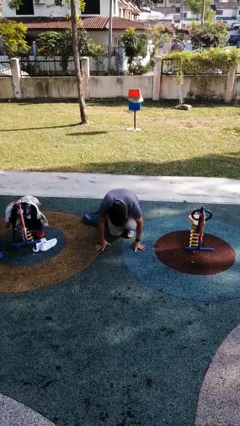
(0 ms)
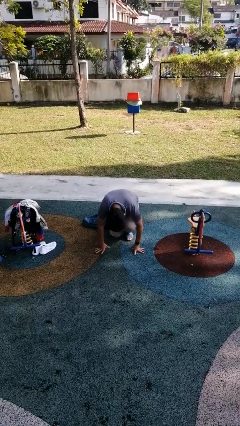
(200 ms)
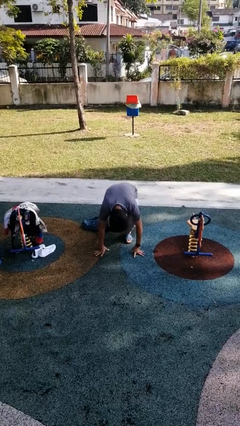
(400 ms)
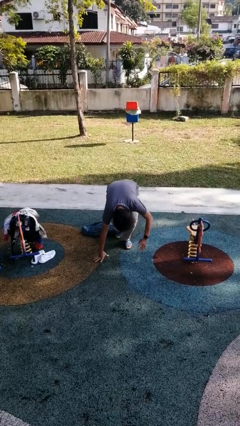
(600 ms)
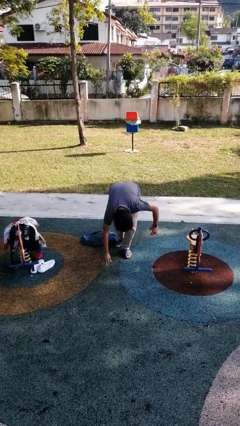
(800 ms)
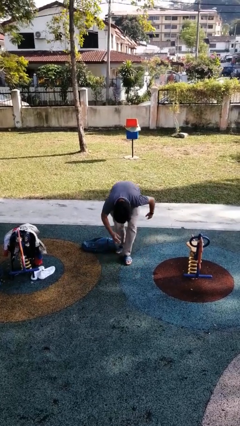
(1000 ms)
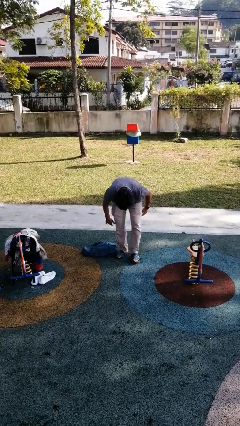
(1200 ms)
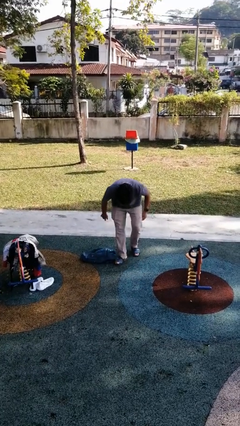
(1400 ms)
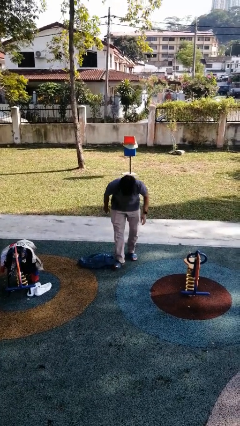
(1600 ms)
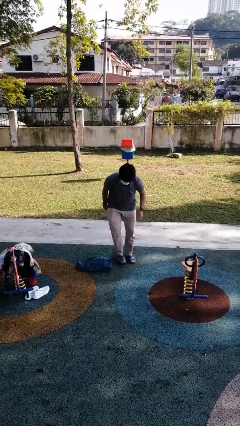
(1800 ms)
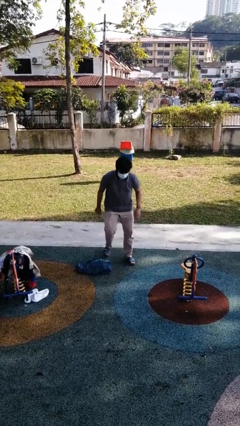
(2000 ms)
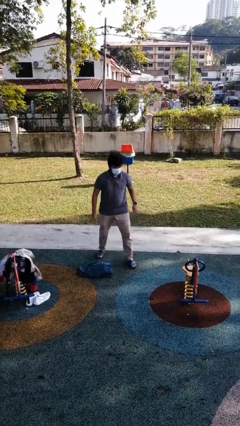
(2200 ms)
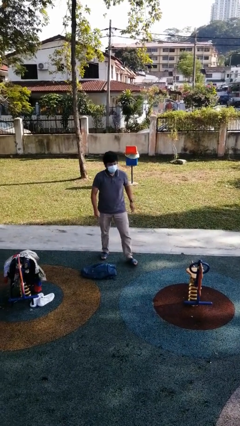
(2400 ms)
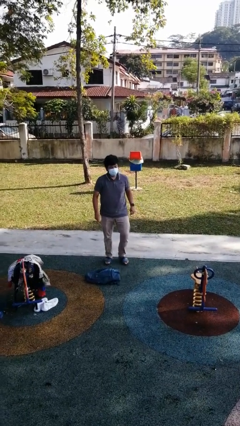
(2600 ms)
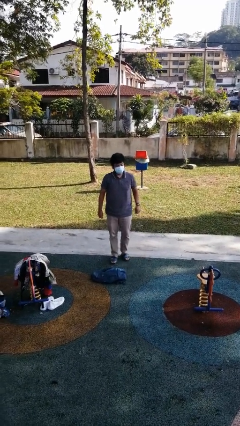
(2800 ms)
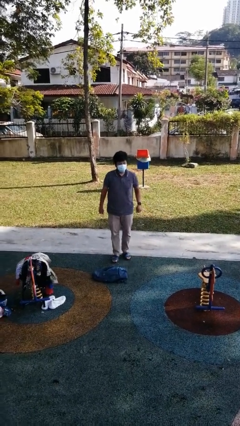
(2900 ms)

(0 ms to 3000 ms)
person stands up from floor

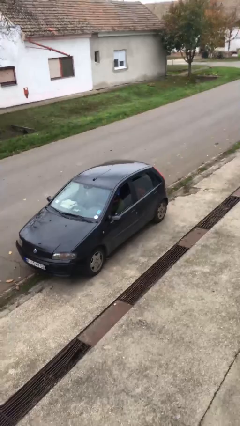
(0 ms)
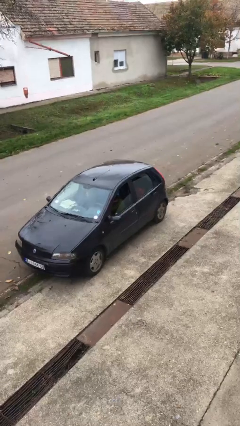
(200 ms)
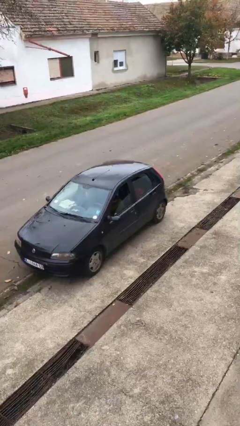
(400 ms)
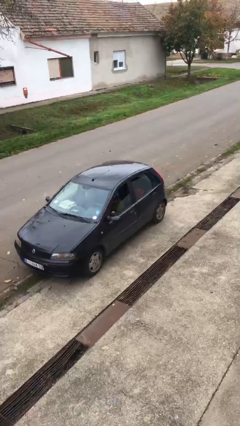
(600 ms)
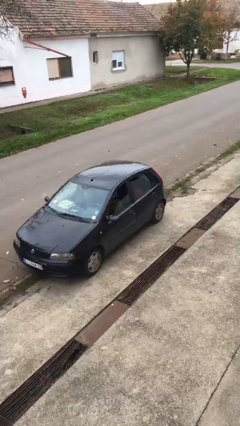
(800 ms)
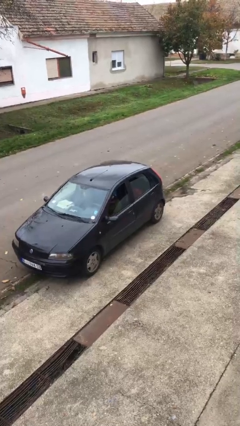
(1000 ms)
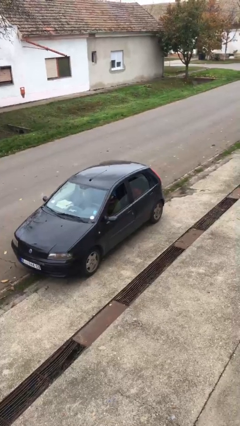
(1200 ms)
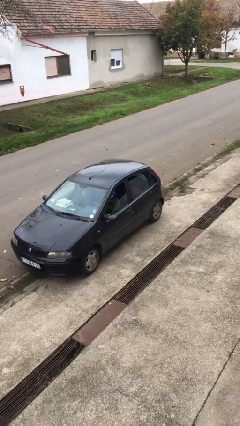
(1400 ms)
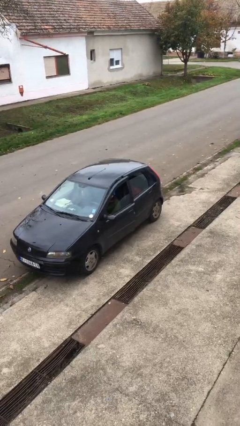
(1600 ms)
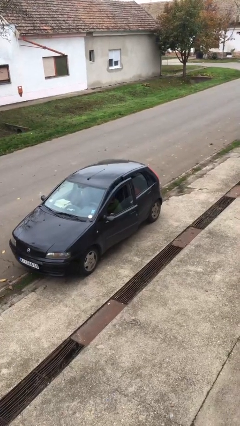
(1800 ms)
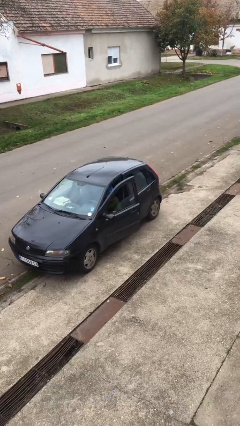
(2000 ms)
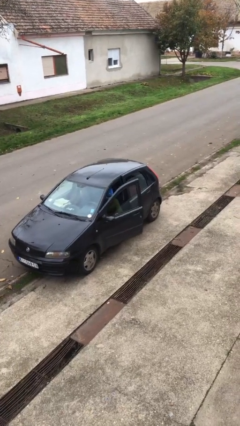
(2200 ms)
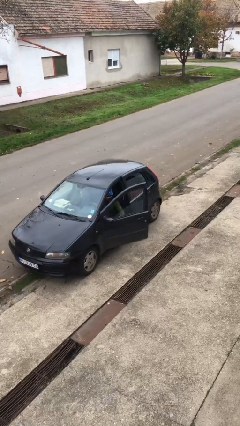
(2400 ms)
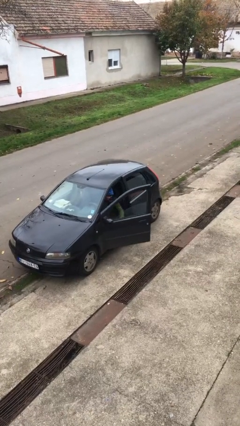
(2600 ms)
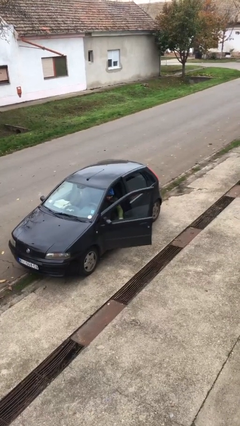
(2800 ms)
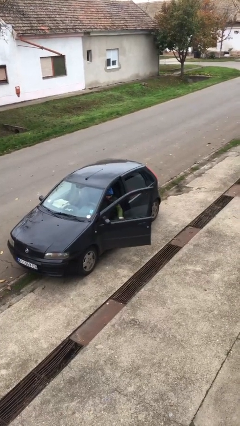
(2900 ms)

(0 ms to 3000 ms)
person opens car door

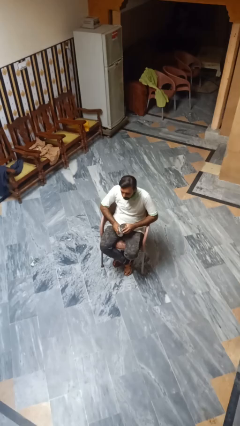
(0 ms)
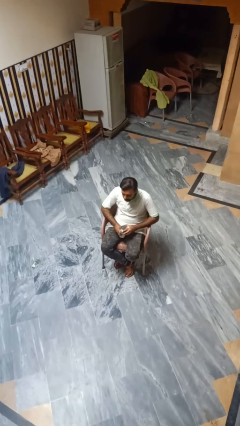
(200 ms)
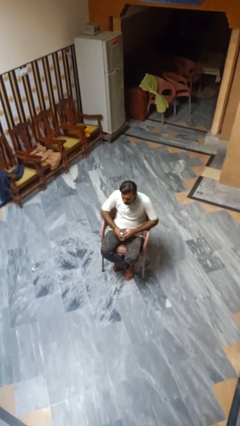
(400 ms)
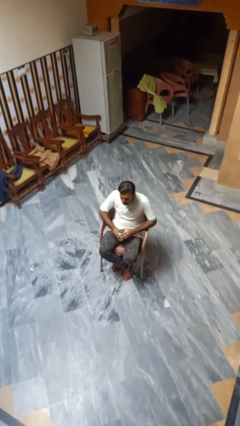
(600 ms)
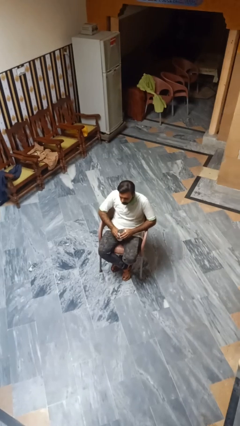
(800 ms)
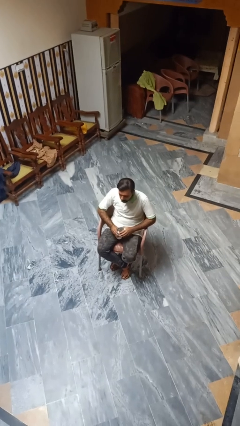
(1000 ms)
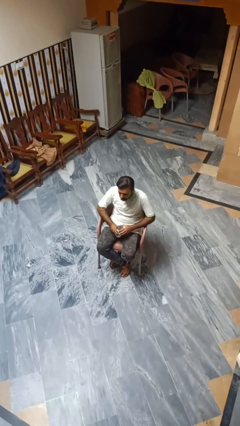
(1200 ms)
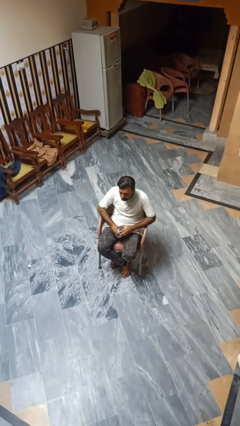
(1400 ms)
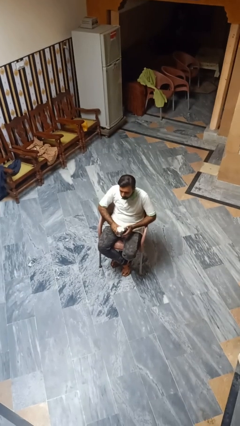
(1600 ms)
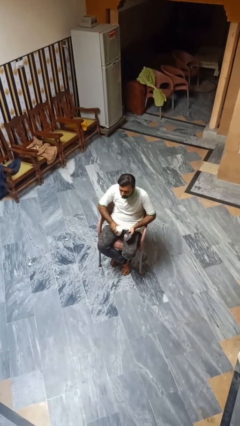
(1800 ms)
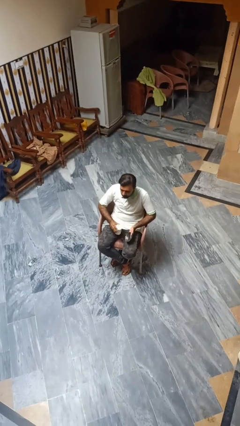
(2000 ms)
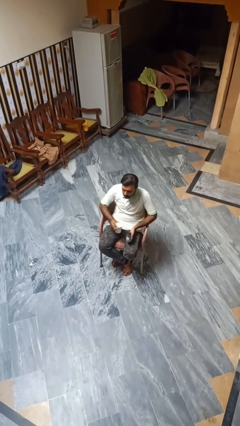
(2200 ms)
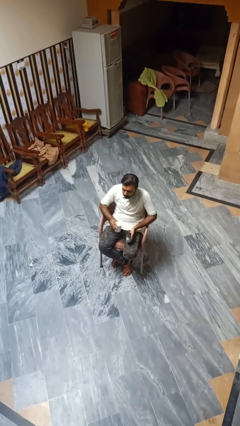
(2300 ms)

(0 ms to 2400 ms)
person opens beverage can

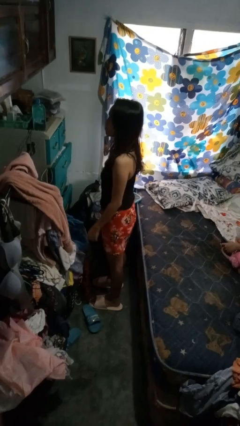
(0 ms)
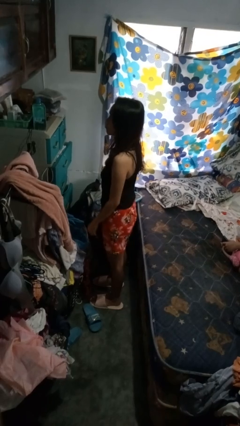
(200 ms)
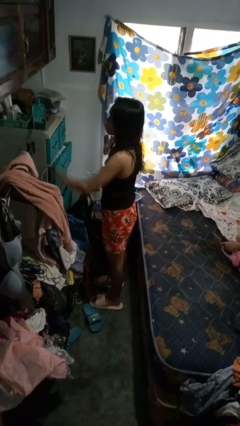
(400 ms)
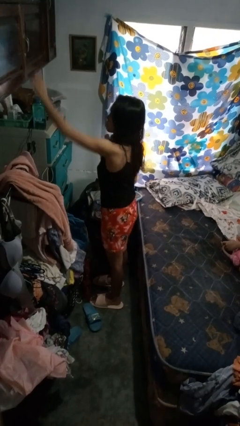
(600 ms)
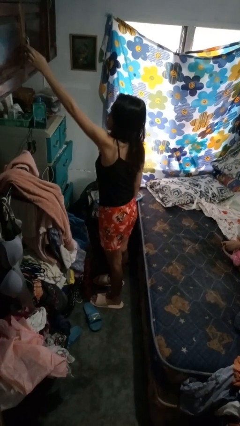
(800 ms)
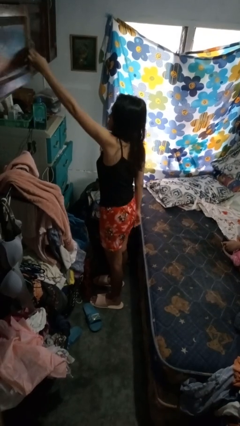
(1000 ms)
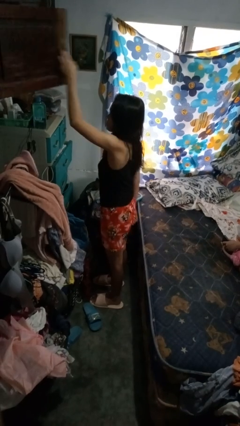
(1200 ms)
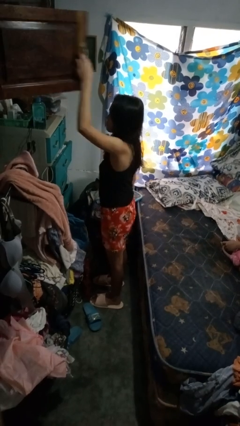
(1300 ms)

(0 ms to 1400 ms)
person opens closet door

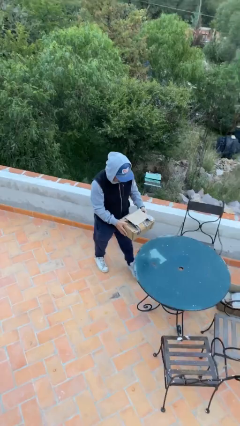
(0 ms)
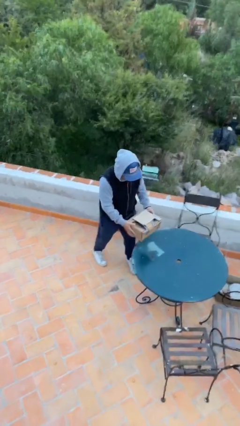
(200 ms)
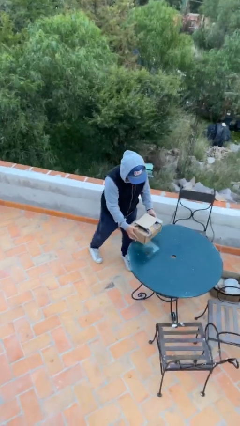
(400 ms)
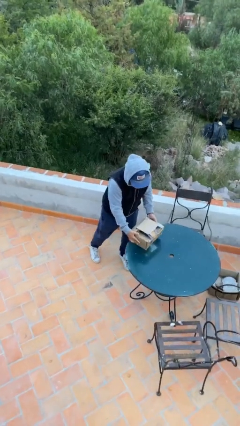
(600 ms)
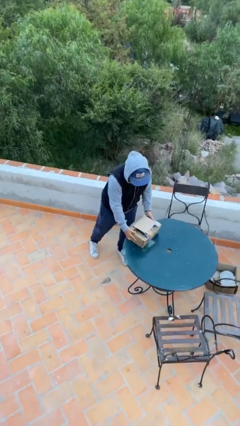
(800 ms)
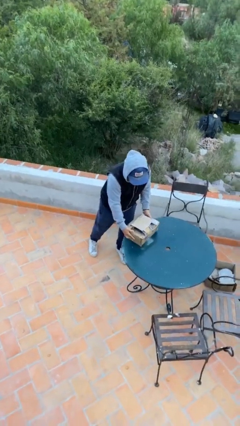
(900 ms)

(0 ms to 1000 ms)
person puts down object on table

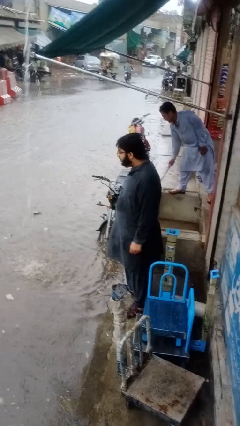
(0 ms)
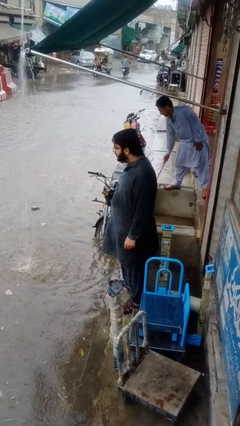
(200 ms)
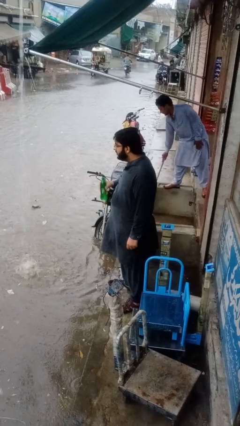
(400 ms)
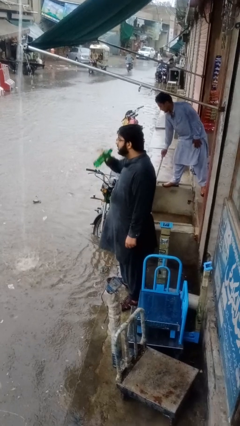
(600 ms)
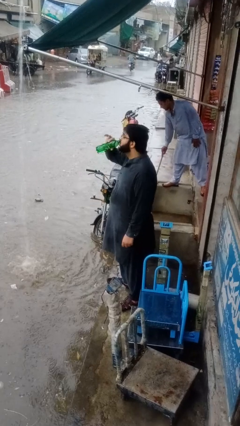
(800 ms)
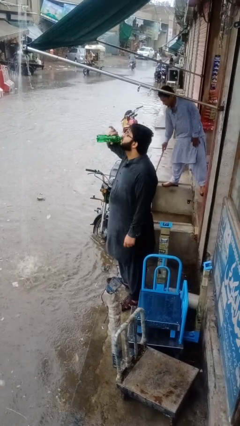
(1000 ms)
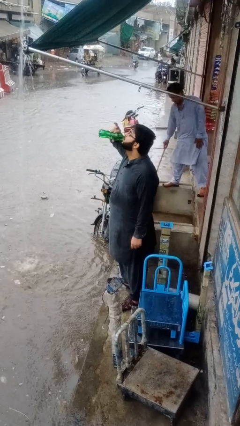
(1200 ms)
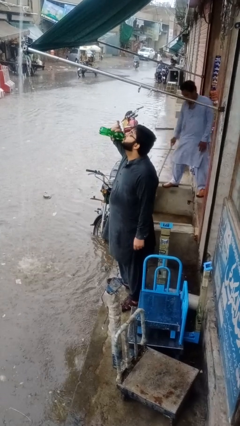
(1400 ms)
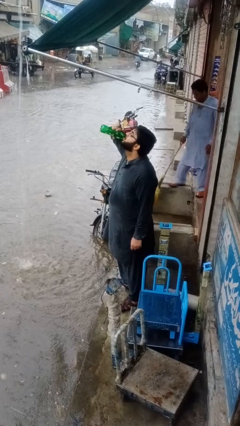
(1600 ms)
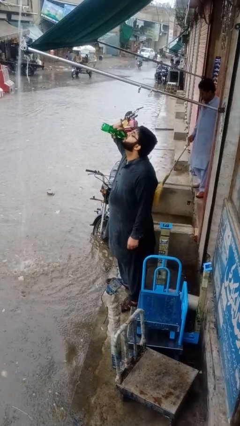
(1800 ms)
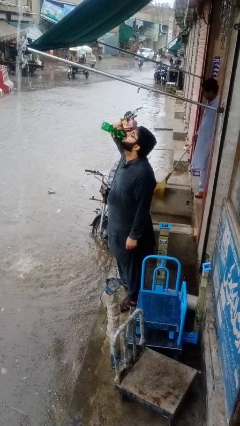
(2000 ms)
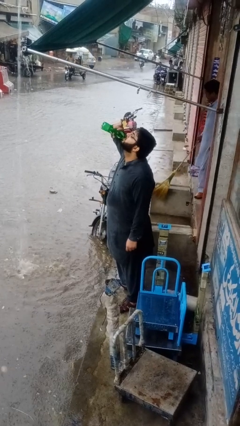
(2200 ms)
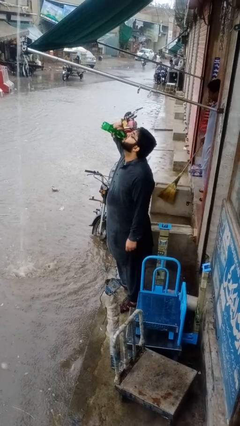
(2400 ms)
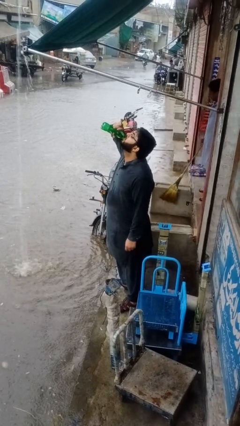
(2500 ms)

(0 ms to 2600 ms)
person drinks from bottle

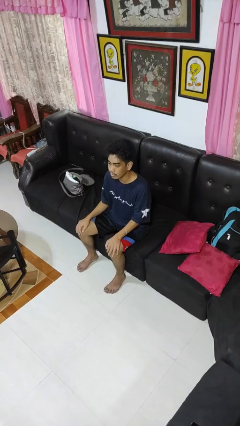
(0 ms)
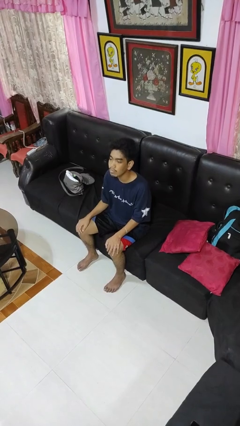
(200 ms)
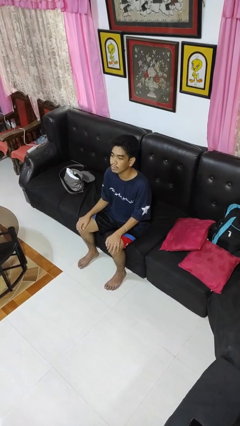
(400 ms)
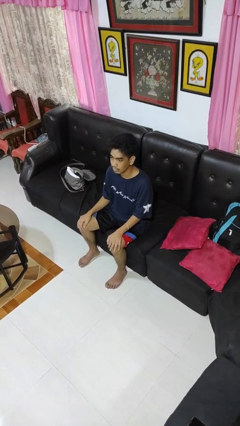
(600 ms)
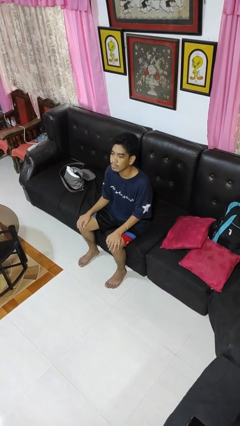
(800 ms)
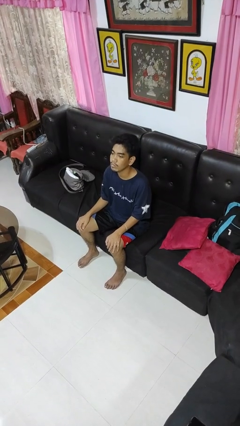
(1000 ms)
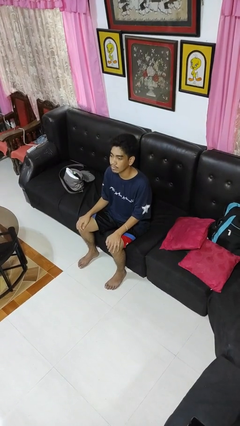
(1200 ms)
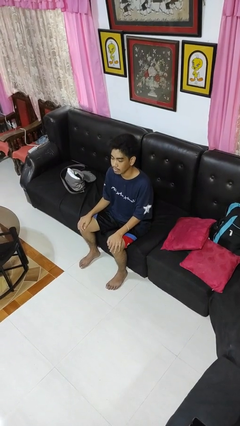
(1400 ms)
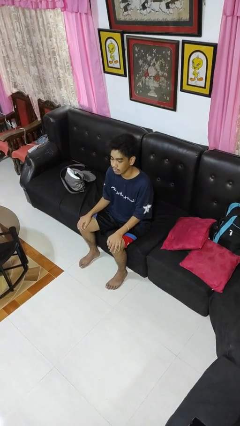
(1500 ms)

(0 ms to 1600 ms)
person nods head

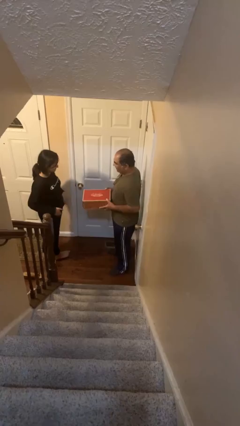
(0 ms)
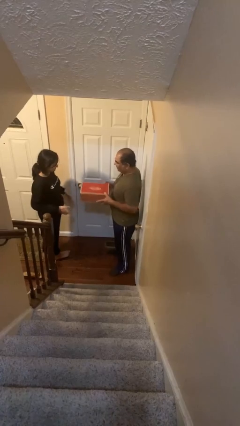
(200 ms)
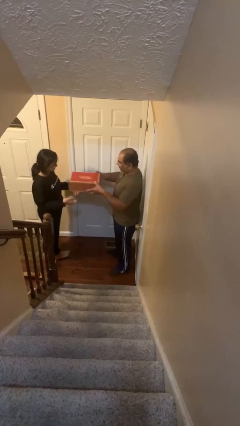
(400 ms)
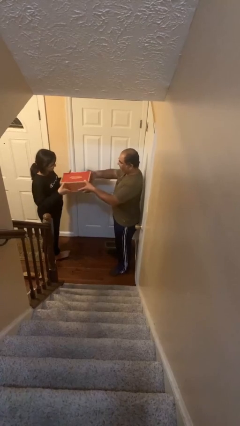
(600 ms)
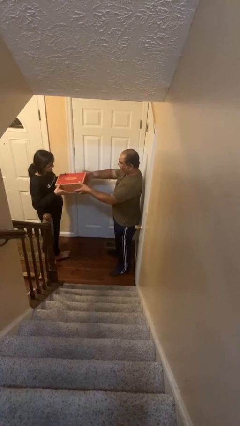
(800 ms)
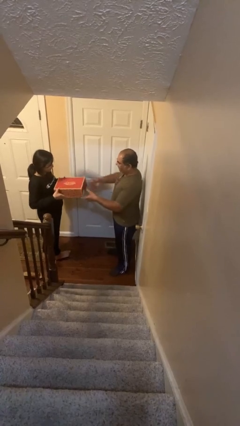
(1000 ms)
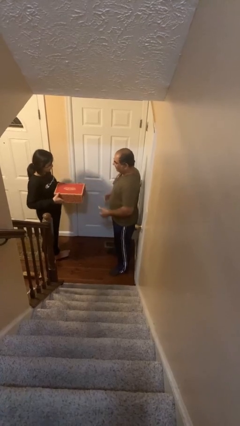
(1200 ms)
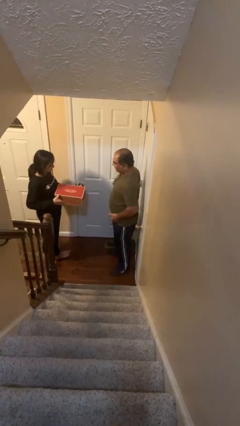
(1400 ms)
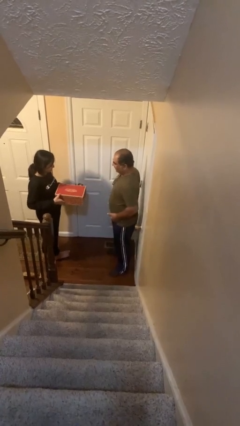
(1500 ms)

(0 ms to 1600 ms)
person transfers object to person
